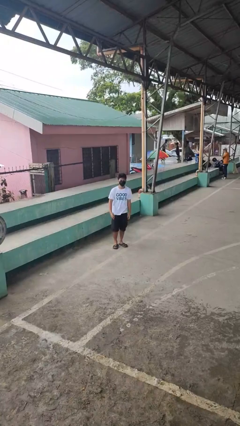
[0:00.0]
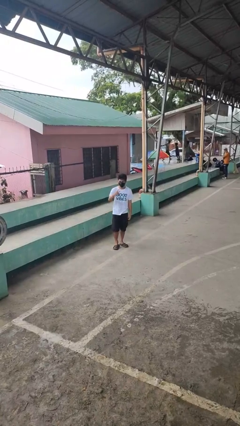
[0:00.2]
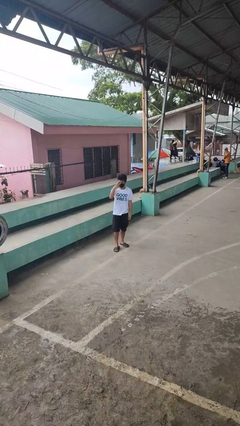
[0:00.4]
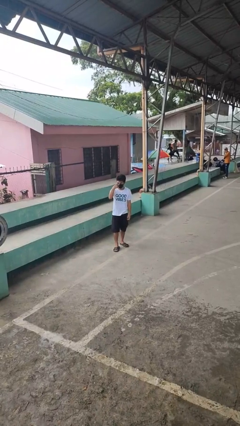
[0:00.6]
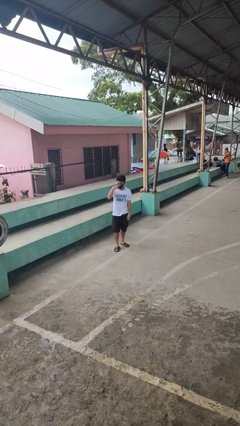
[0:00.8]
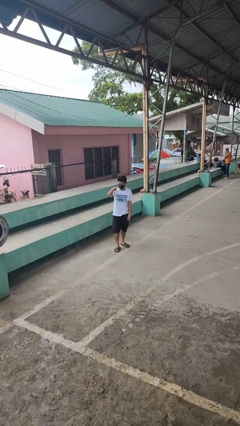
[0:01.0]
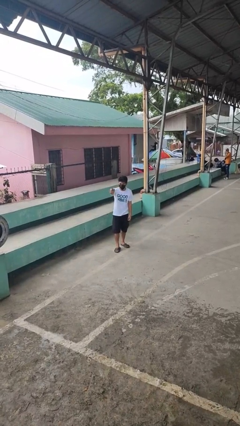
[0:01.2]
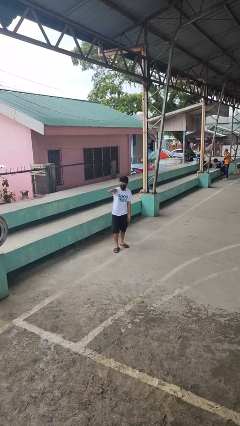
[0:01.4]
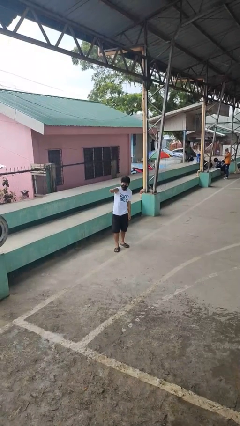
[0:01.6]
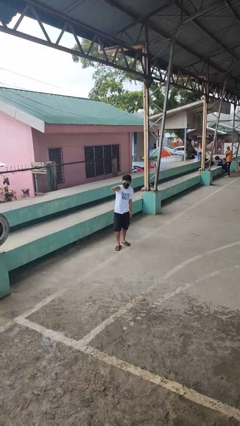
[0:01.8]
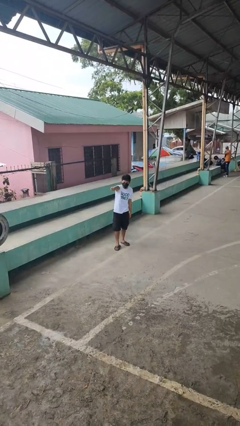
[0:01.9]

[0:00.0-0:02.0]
person gestures watch closely

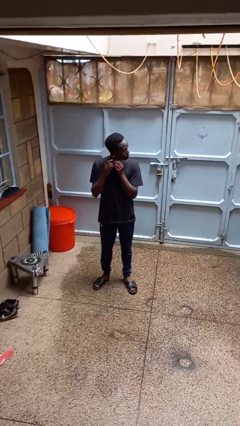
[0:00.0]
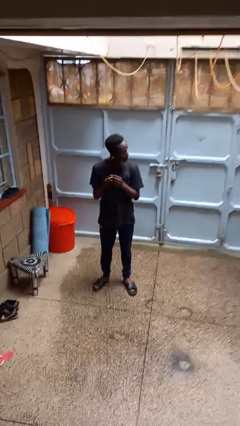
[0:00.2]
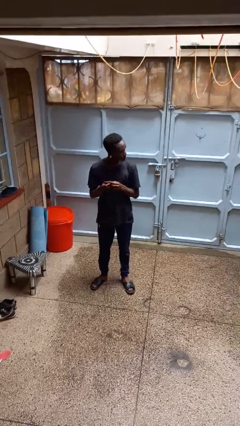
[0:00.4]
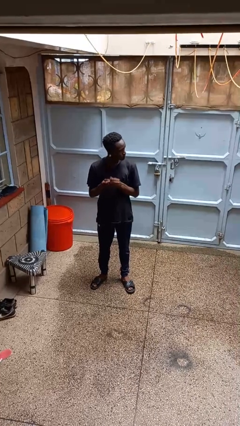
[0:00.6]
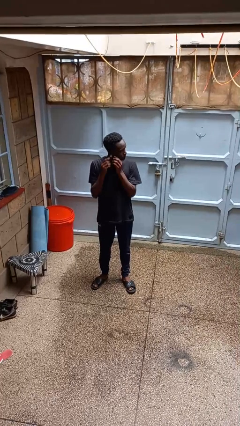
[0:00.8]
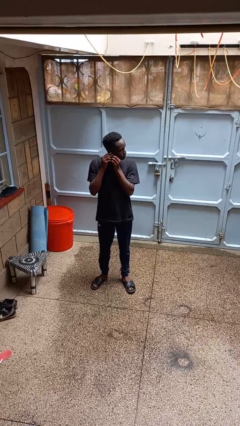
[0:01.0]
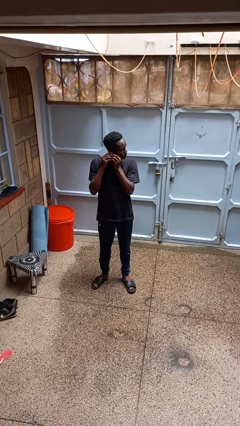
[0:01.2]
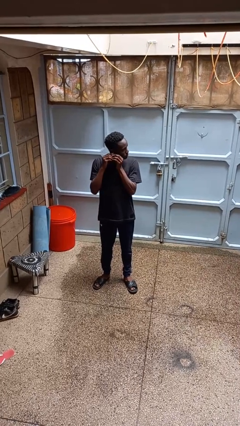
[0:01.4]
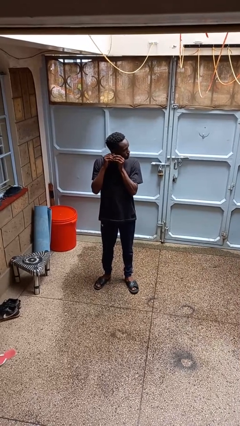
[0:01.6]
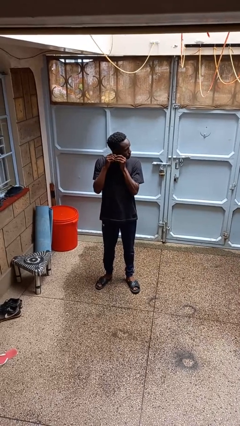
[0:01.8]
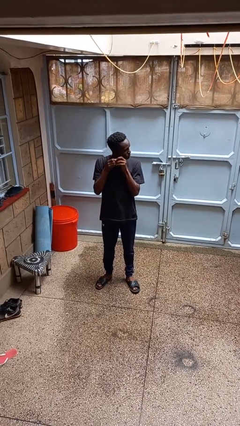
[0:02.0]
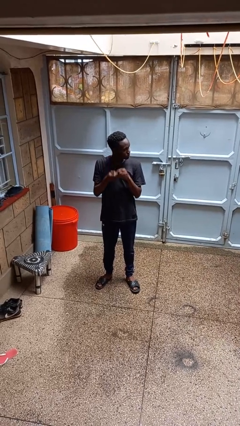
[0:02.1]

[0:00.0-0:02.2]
person takes off earrings

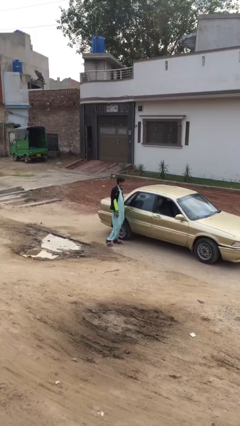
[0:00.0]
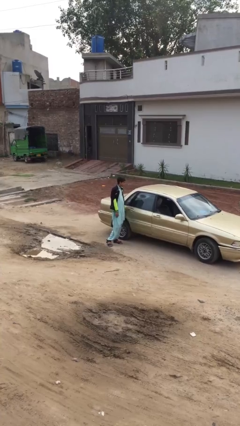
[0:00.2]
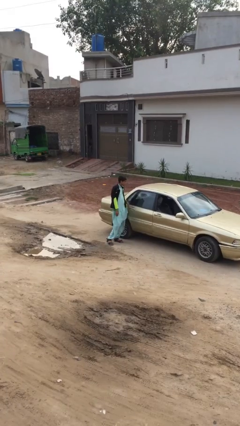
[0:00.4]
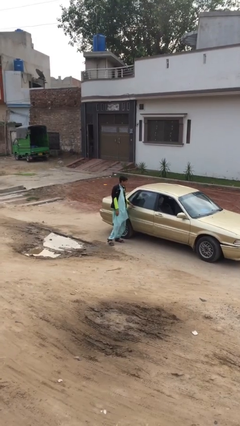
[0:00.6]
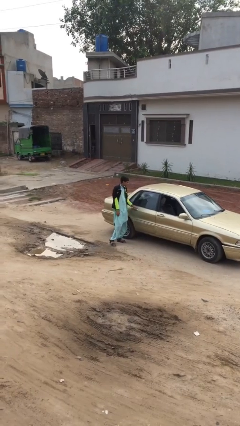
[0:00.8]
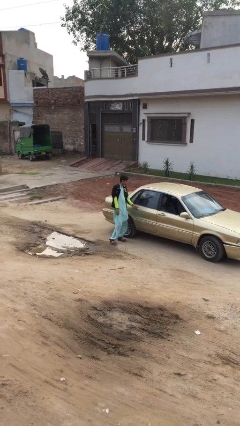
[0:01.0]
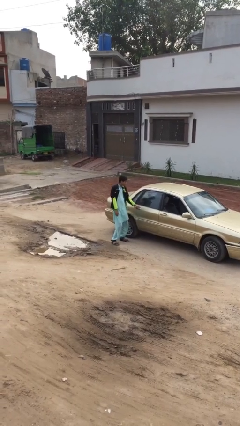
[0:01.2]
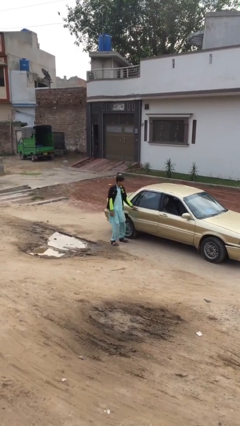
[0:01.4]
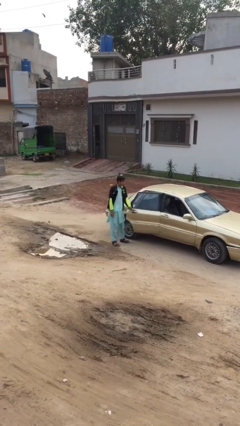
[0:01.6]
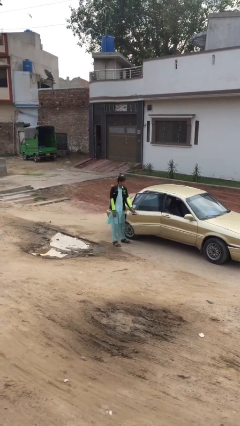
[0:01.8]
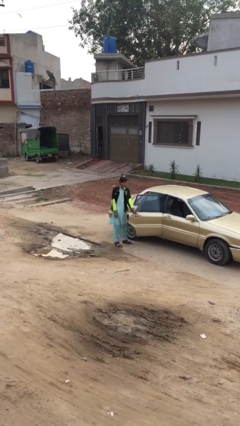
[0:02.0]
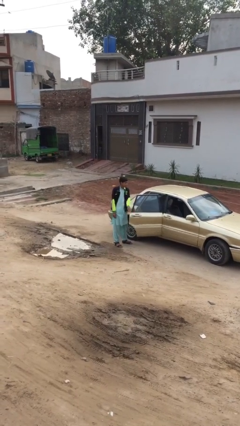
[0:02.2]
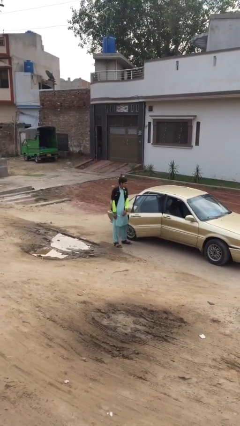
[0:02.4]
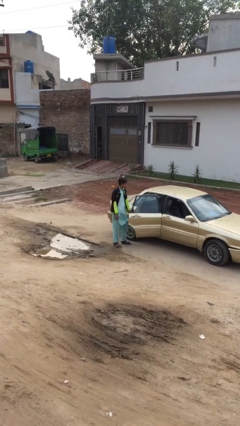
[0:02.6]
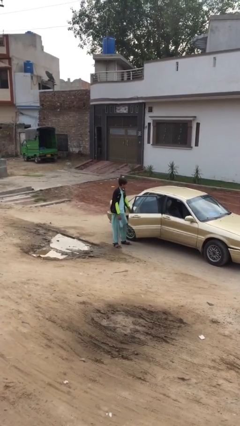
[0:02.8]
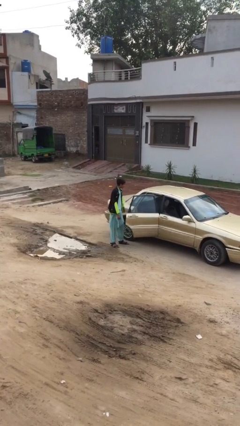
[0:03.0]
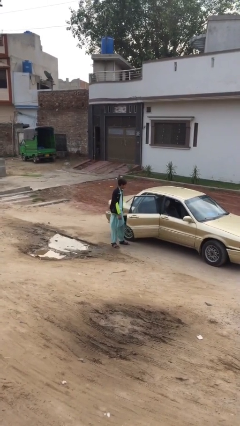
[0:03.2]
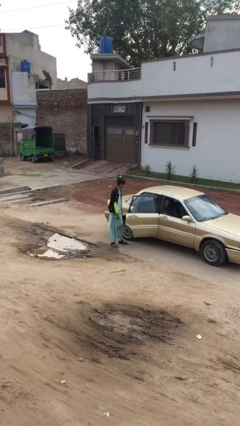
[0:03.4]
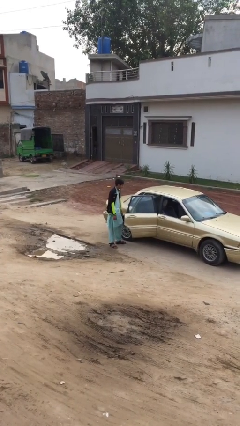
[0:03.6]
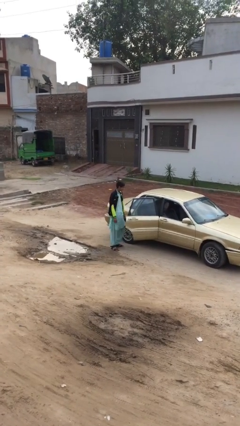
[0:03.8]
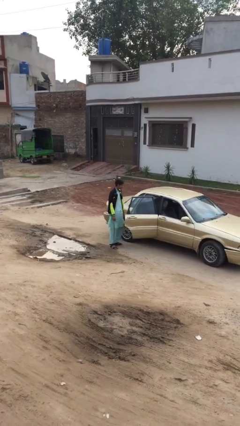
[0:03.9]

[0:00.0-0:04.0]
person opens car door

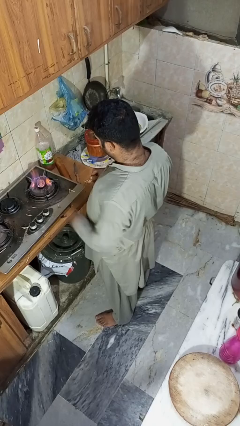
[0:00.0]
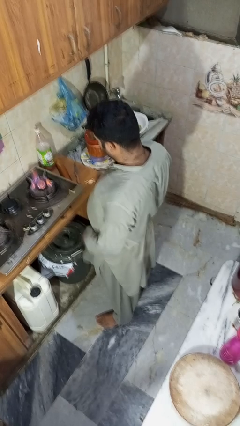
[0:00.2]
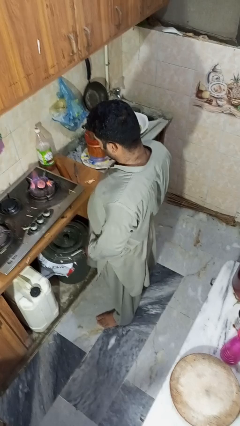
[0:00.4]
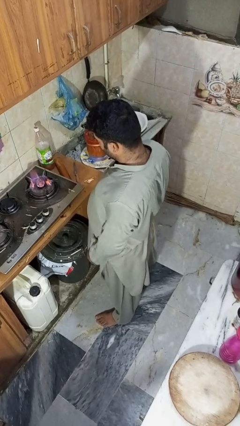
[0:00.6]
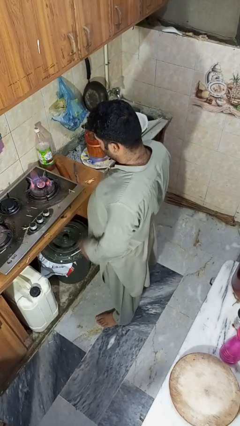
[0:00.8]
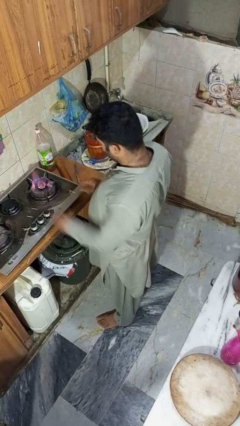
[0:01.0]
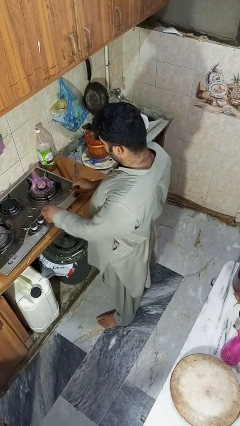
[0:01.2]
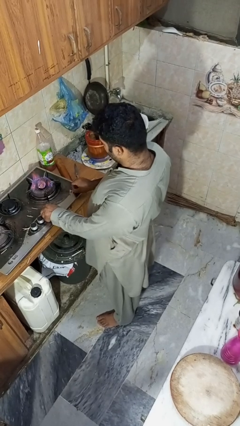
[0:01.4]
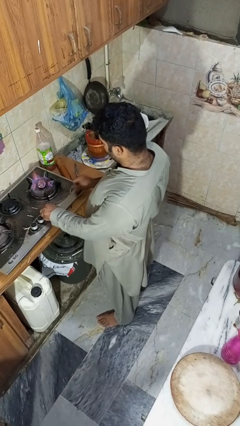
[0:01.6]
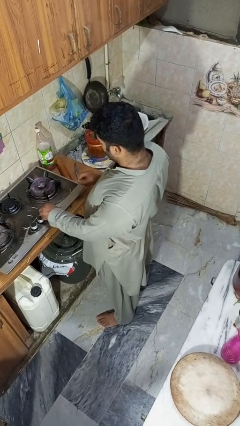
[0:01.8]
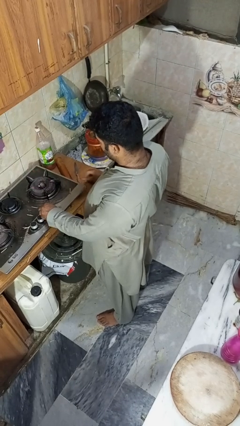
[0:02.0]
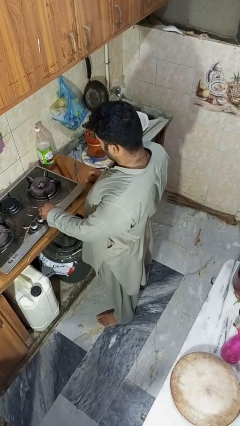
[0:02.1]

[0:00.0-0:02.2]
person turns off stovetop

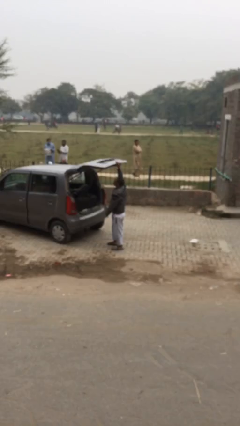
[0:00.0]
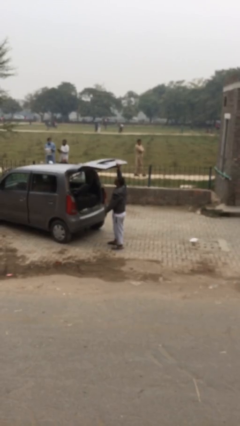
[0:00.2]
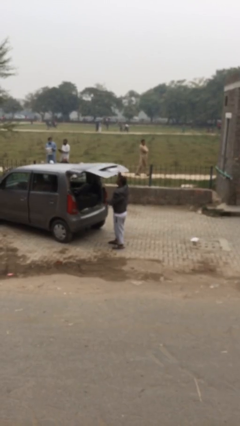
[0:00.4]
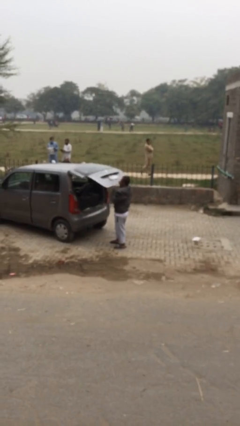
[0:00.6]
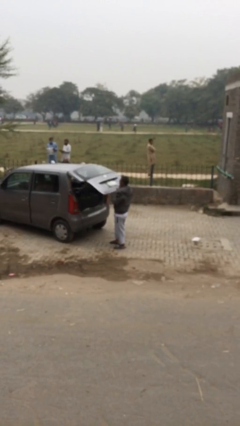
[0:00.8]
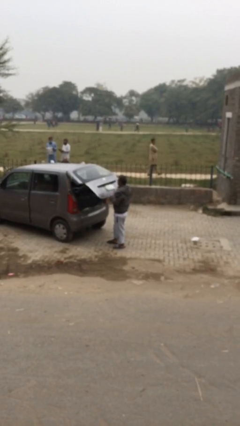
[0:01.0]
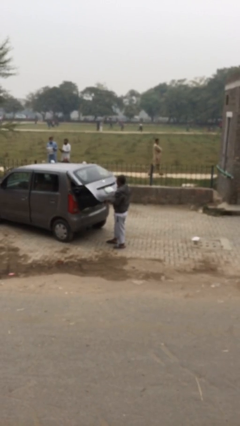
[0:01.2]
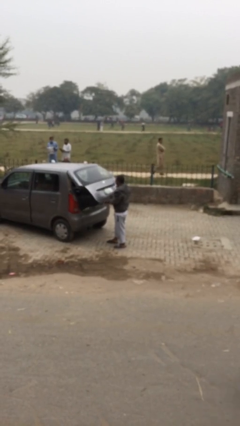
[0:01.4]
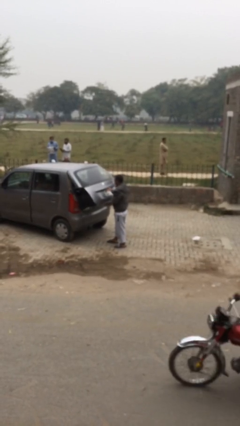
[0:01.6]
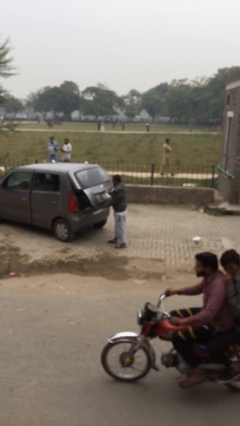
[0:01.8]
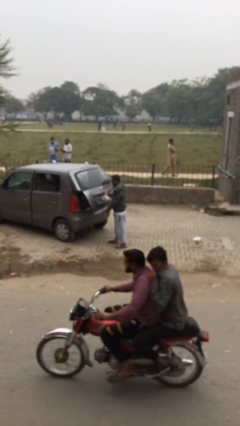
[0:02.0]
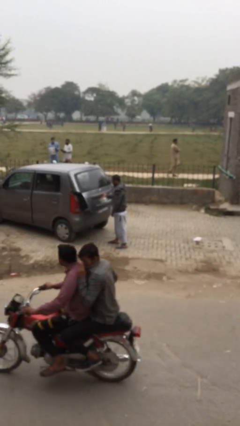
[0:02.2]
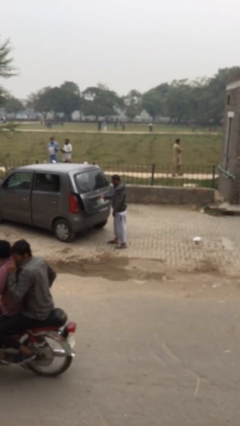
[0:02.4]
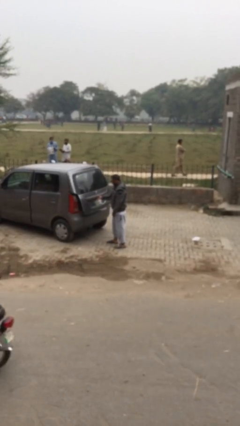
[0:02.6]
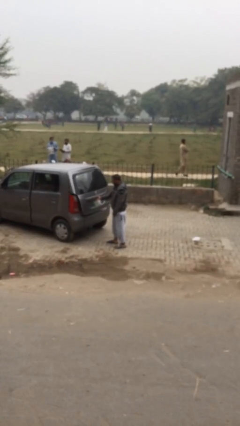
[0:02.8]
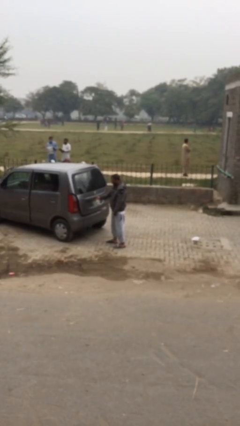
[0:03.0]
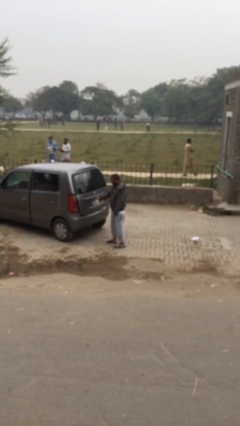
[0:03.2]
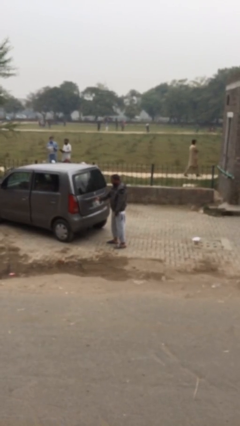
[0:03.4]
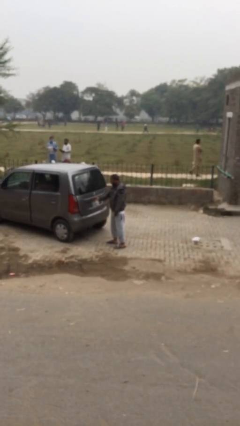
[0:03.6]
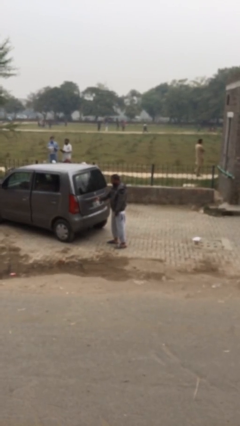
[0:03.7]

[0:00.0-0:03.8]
person closes car trunk

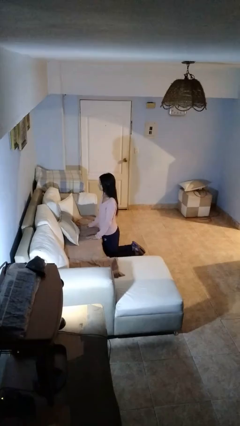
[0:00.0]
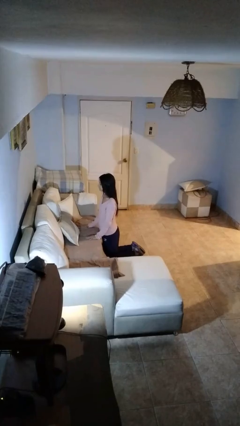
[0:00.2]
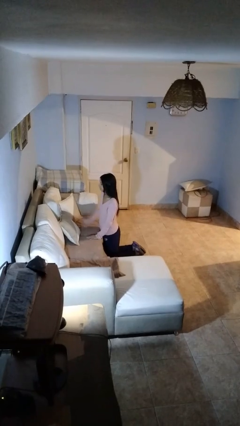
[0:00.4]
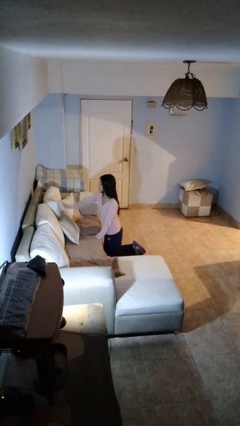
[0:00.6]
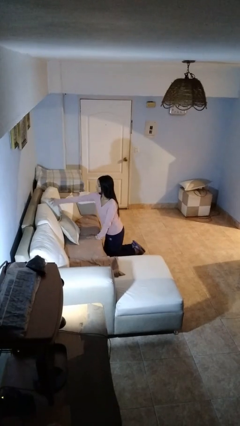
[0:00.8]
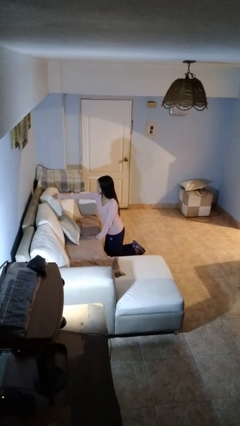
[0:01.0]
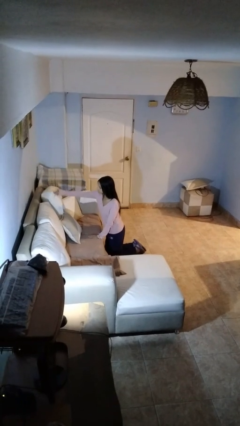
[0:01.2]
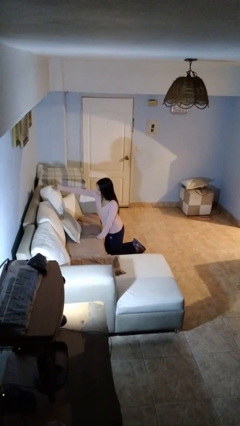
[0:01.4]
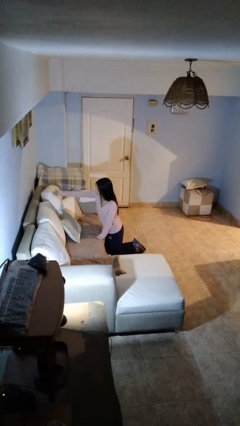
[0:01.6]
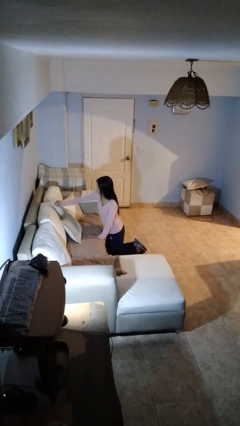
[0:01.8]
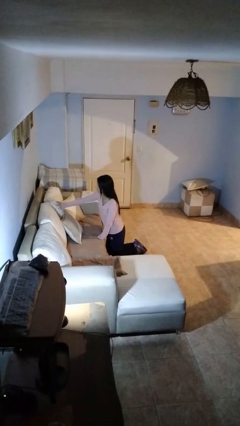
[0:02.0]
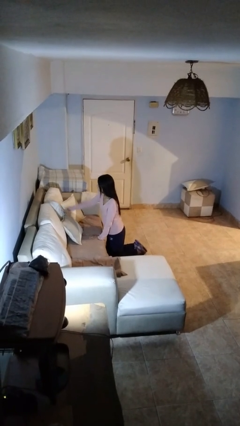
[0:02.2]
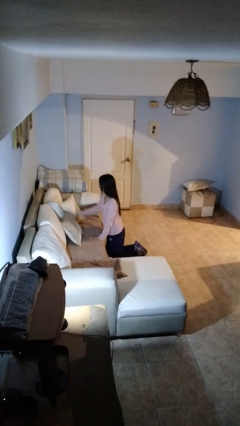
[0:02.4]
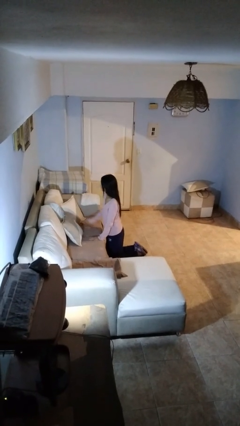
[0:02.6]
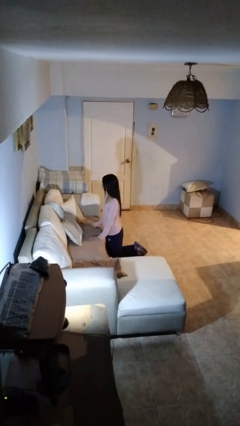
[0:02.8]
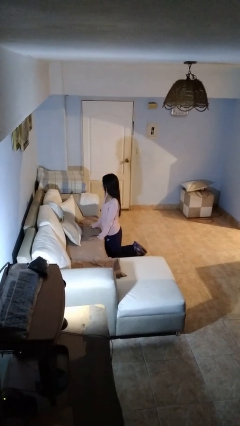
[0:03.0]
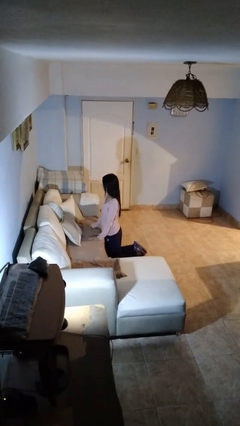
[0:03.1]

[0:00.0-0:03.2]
person searches in couch
